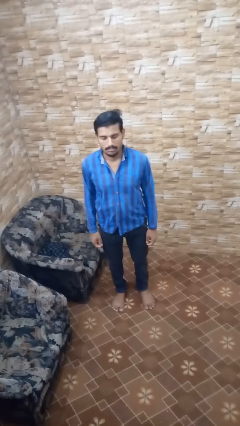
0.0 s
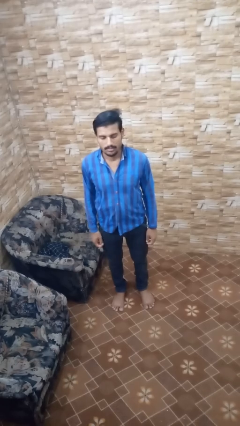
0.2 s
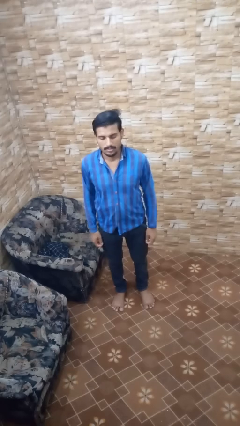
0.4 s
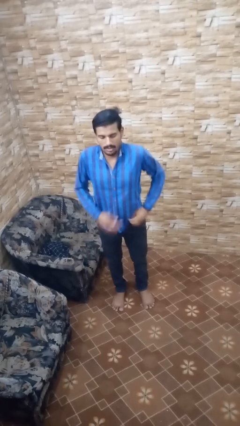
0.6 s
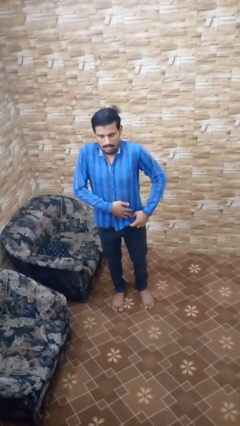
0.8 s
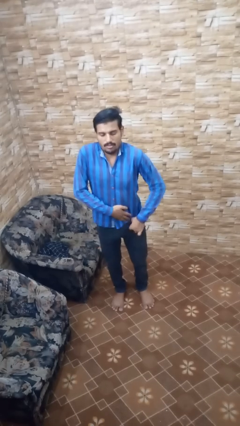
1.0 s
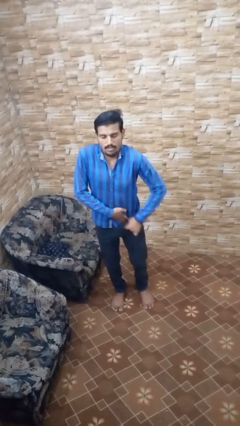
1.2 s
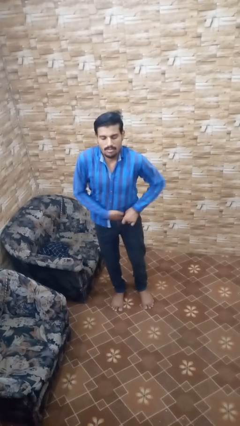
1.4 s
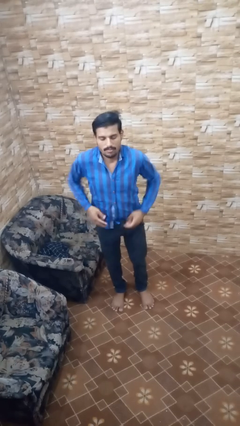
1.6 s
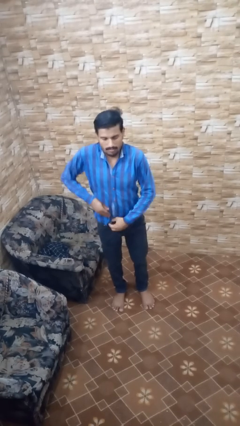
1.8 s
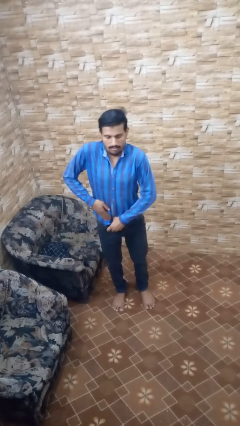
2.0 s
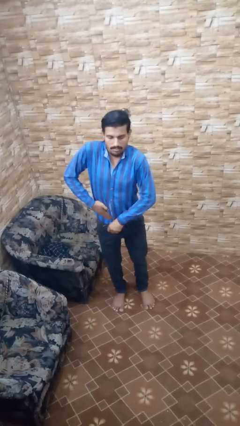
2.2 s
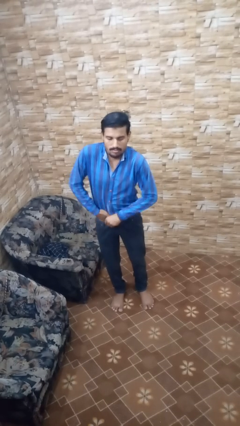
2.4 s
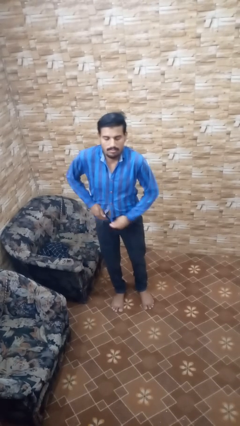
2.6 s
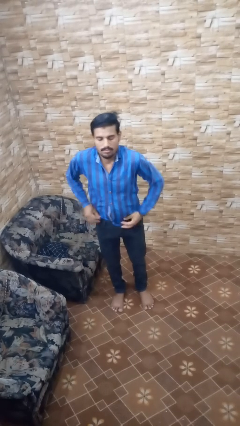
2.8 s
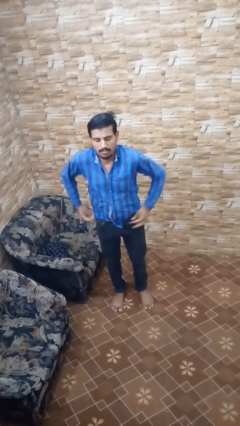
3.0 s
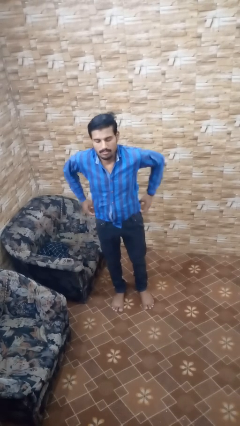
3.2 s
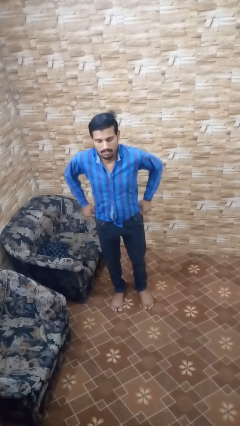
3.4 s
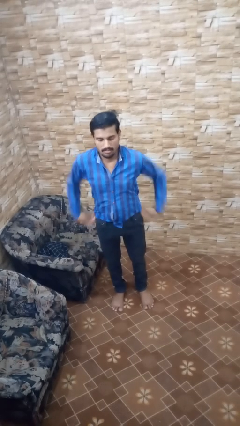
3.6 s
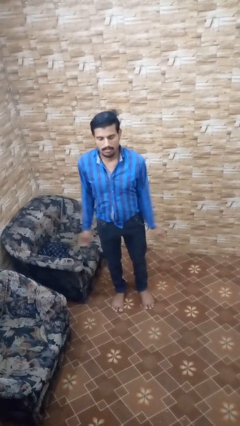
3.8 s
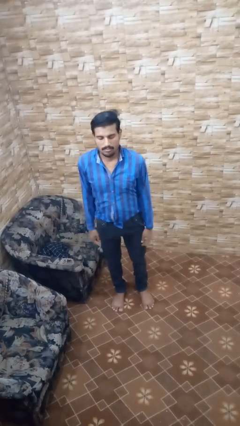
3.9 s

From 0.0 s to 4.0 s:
person tucks in shirt

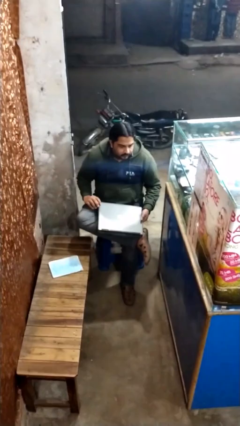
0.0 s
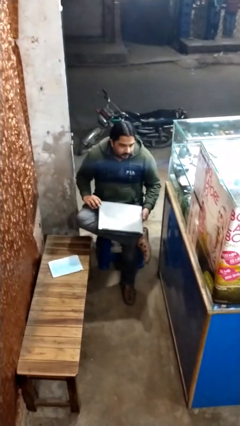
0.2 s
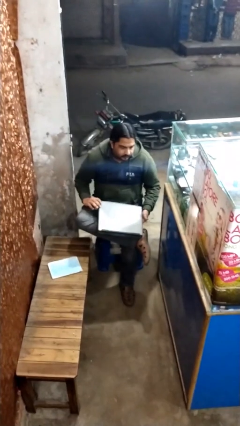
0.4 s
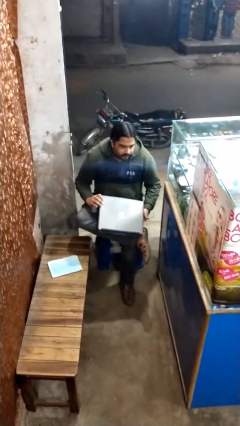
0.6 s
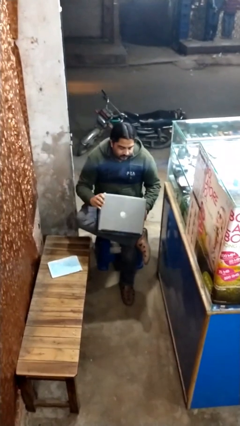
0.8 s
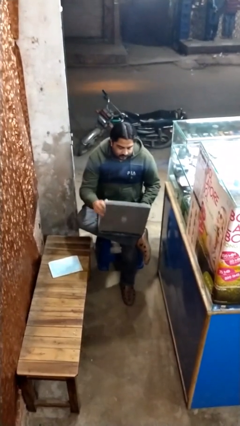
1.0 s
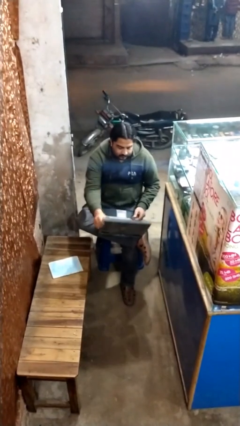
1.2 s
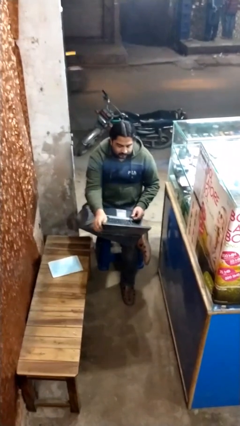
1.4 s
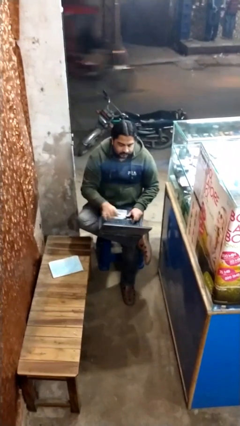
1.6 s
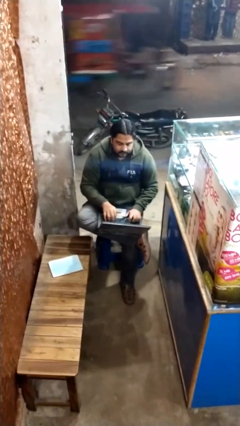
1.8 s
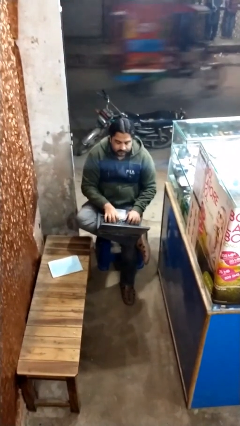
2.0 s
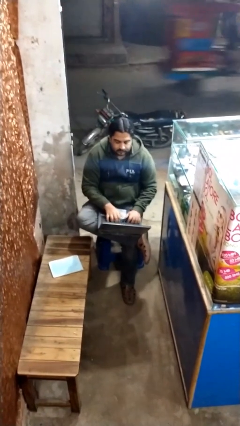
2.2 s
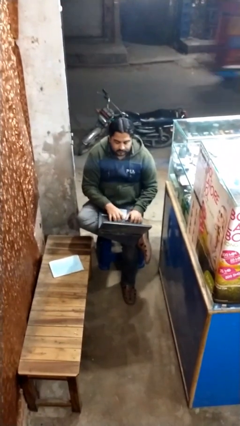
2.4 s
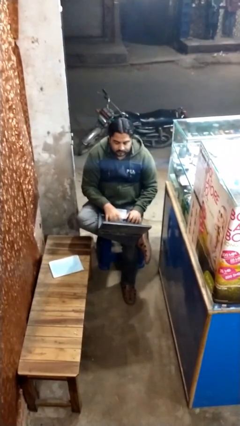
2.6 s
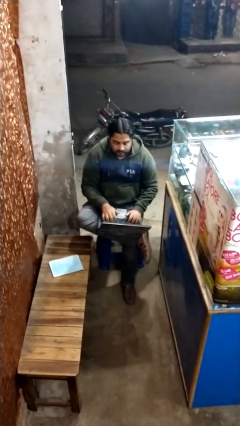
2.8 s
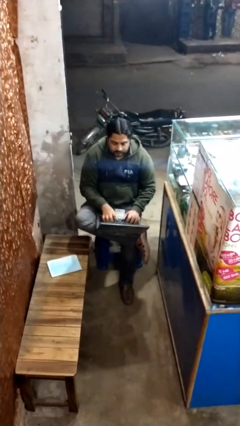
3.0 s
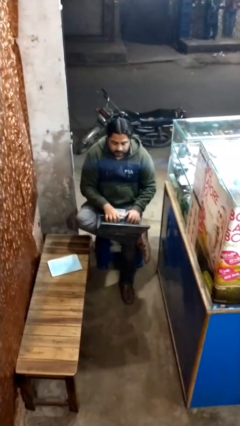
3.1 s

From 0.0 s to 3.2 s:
person interacts with laptop

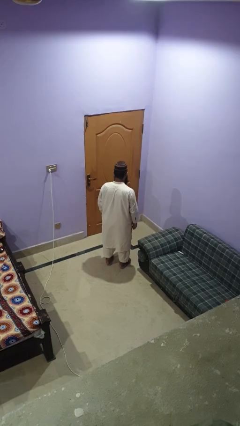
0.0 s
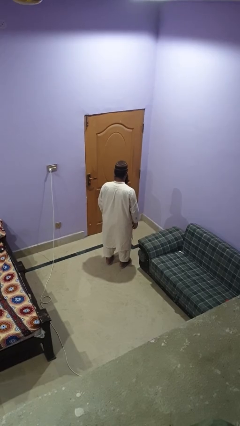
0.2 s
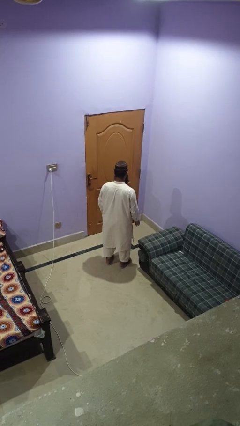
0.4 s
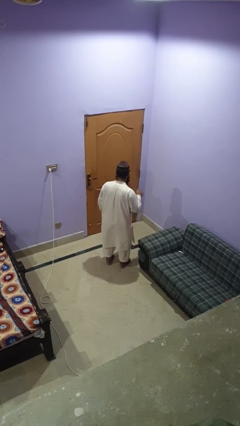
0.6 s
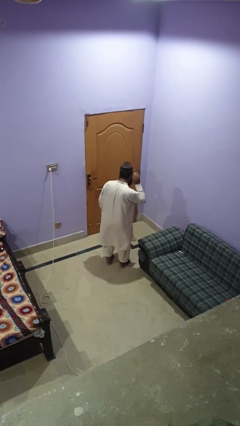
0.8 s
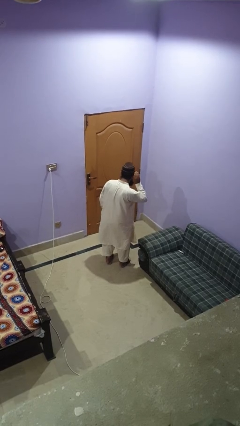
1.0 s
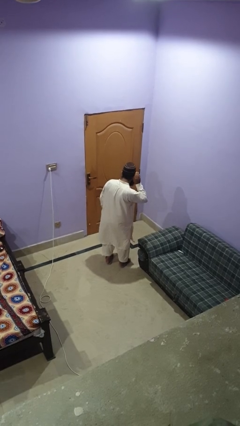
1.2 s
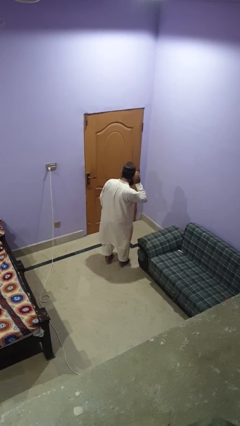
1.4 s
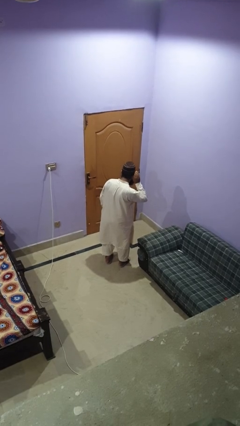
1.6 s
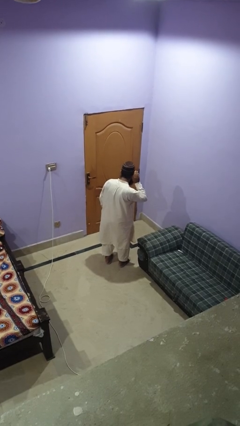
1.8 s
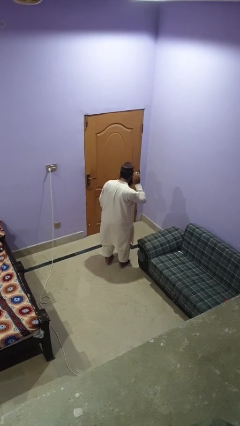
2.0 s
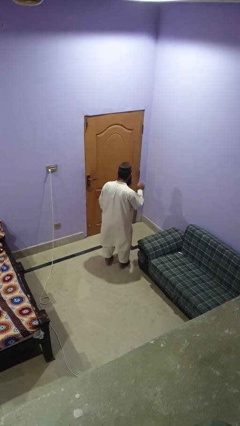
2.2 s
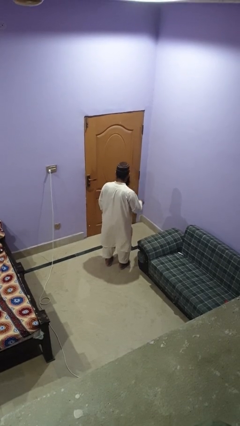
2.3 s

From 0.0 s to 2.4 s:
person gestures listen closely

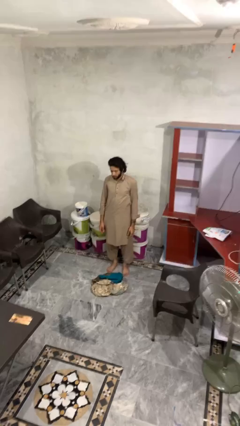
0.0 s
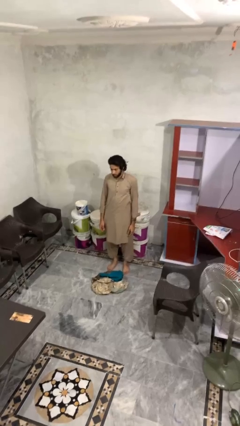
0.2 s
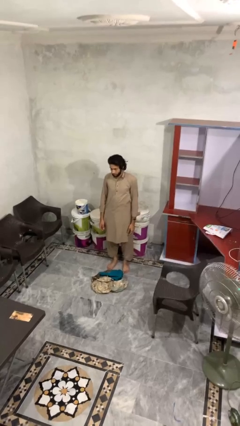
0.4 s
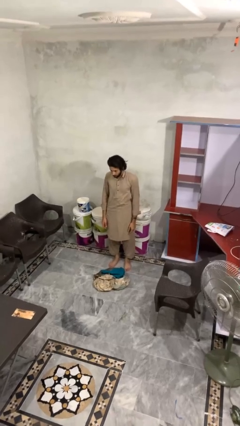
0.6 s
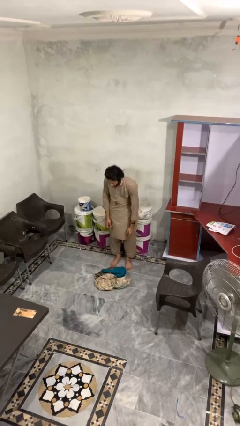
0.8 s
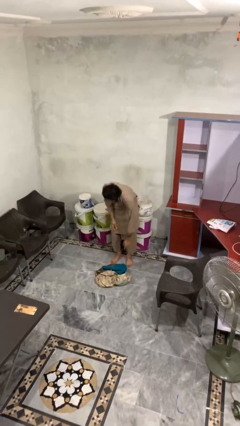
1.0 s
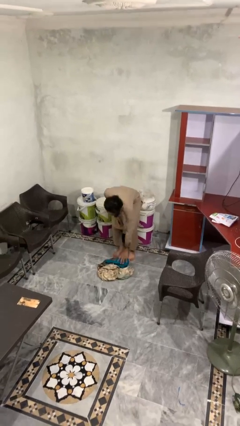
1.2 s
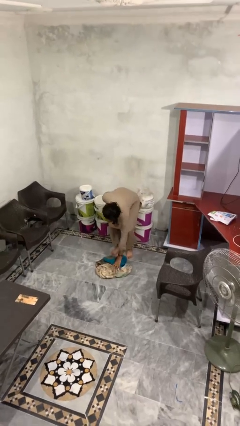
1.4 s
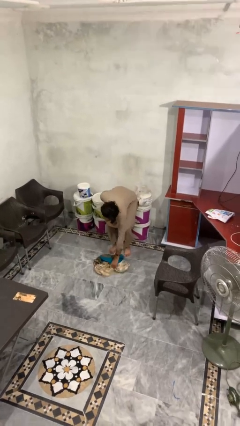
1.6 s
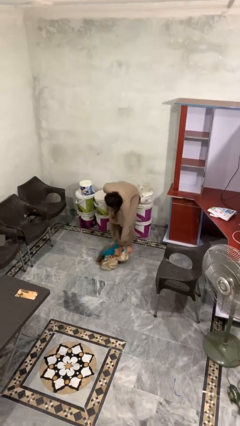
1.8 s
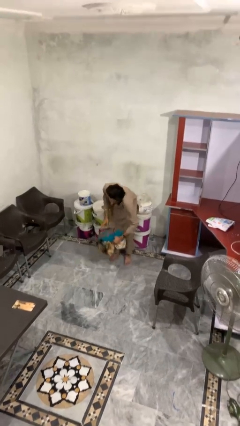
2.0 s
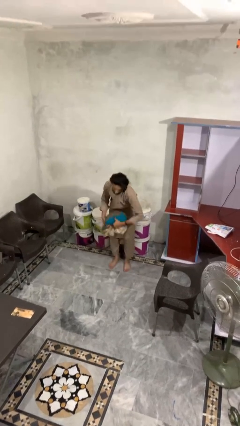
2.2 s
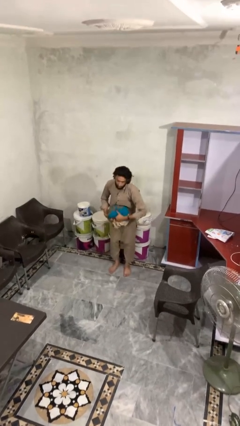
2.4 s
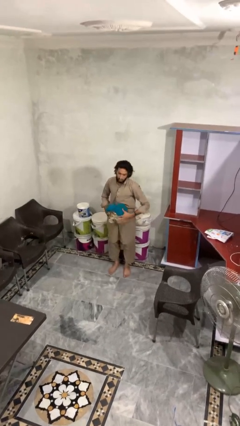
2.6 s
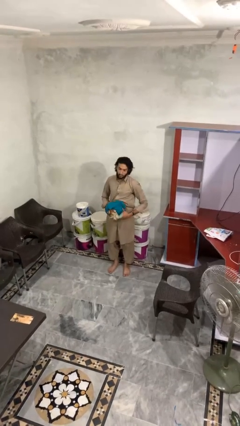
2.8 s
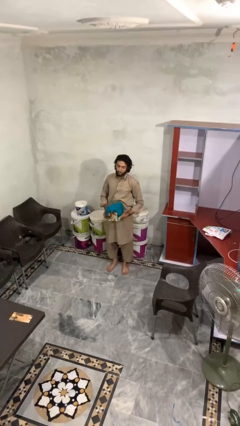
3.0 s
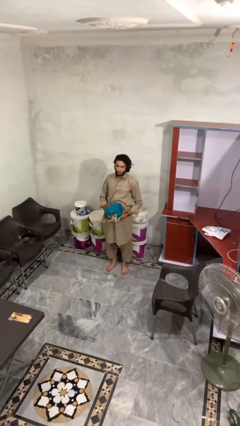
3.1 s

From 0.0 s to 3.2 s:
person picks up object from floor

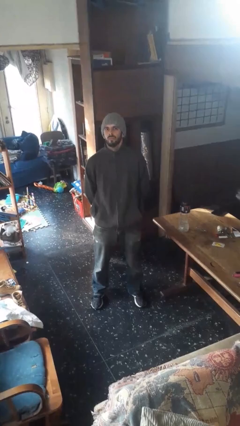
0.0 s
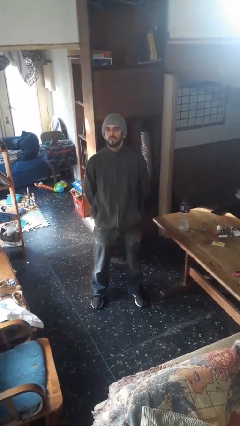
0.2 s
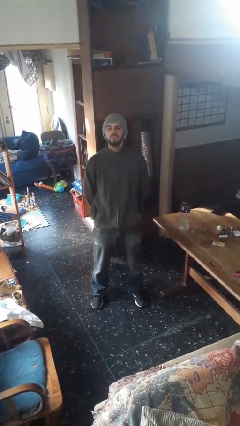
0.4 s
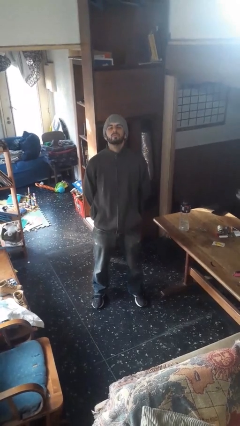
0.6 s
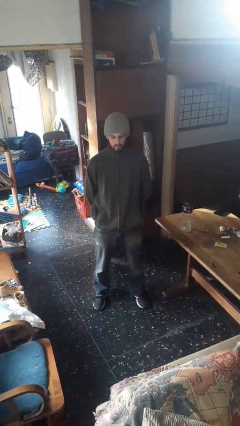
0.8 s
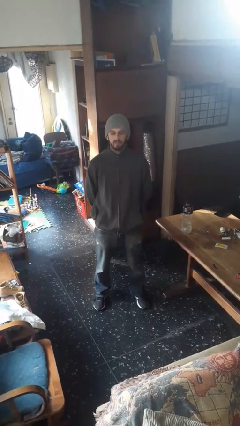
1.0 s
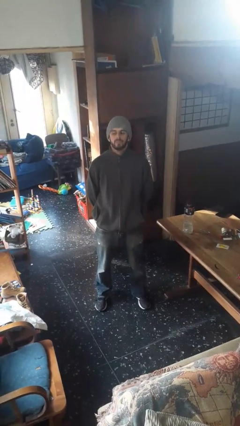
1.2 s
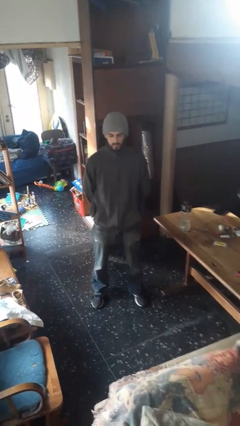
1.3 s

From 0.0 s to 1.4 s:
person nods head

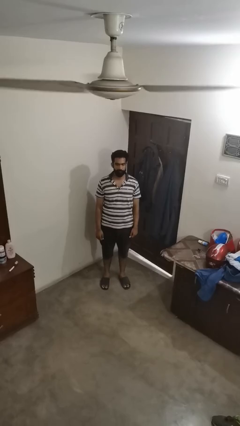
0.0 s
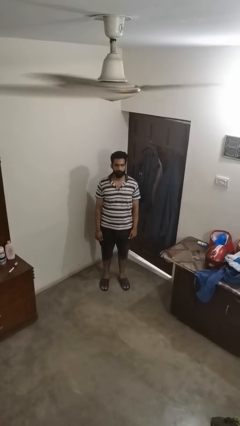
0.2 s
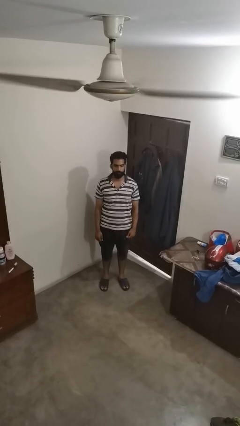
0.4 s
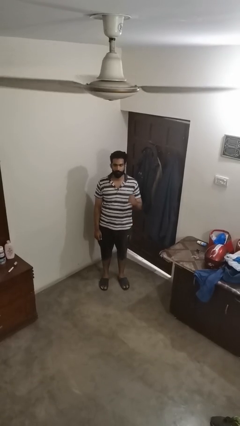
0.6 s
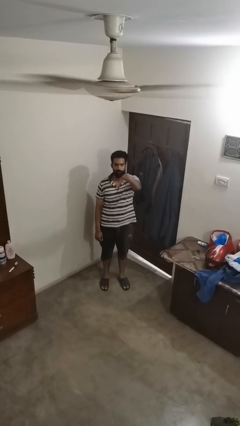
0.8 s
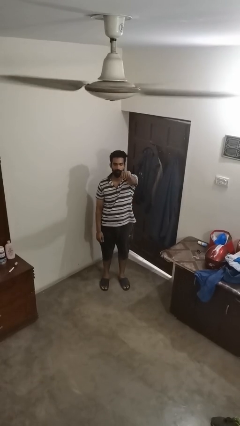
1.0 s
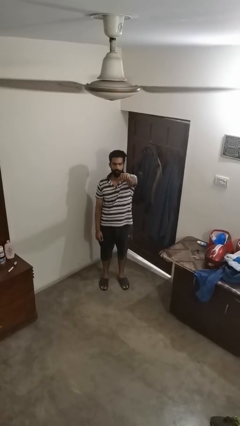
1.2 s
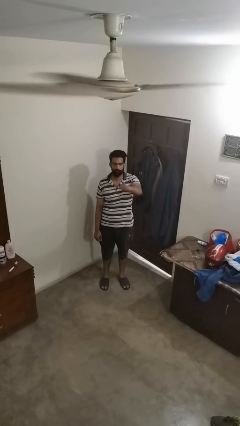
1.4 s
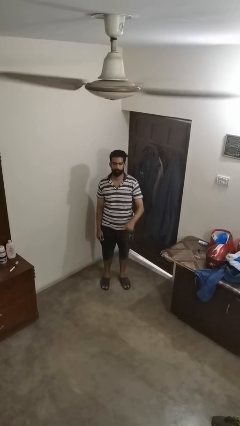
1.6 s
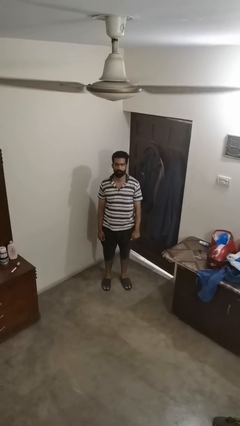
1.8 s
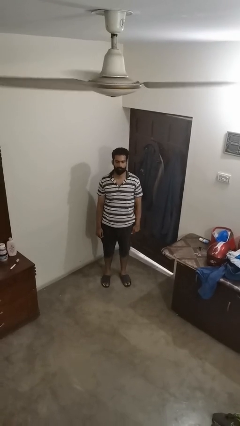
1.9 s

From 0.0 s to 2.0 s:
person punches

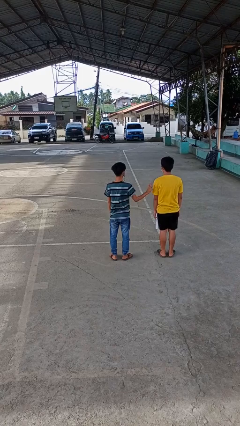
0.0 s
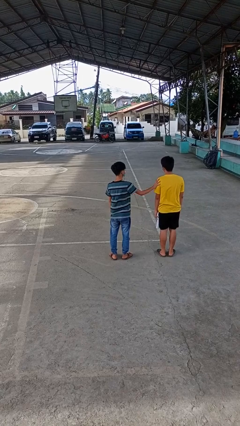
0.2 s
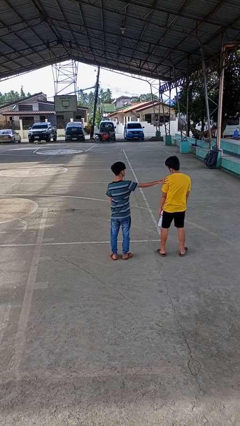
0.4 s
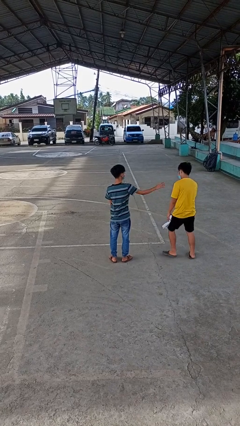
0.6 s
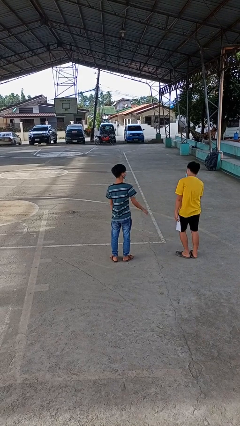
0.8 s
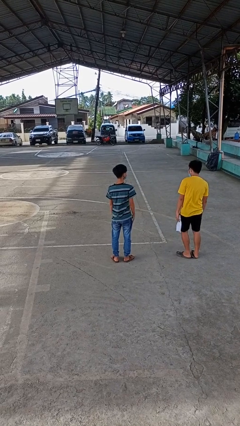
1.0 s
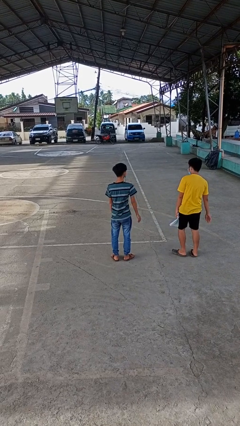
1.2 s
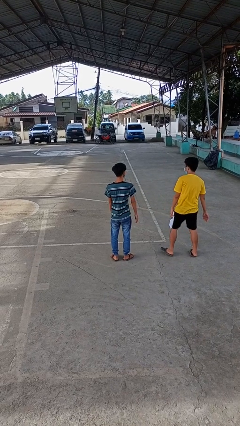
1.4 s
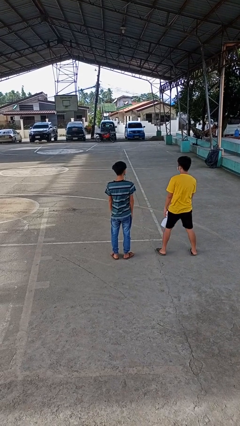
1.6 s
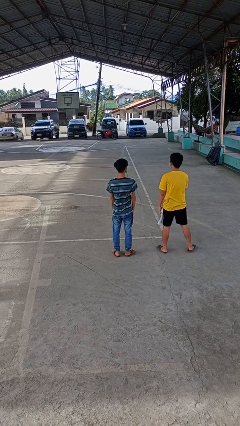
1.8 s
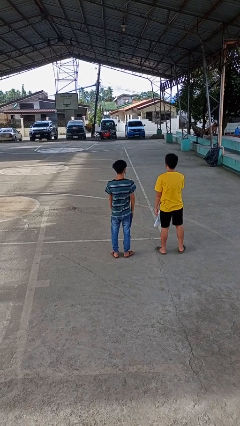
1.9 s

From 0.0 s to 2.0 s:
person shoves person
